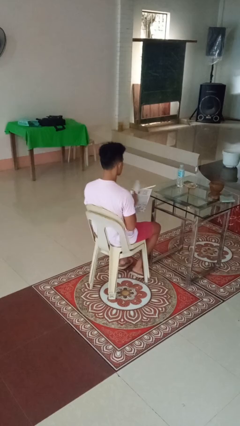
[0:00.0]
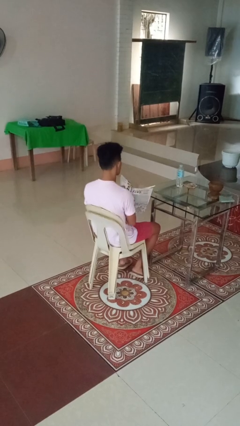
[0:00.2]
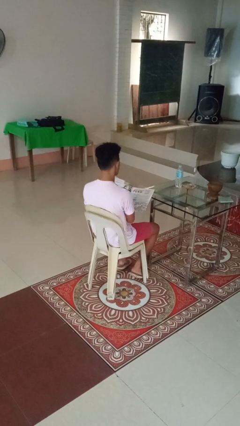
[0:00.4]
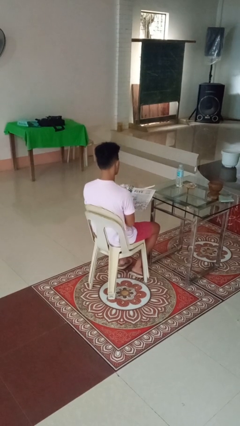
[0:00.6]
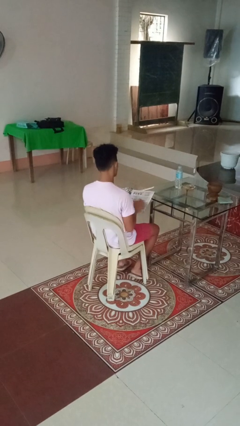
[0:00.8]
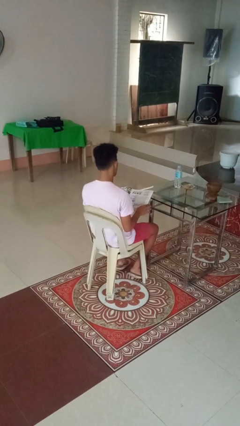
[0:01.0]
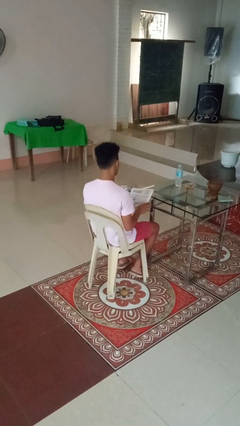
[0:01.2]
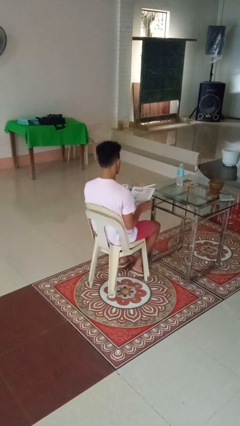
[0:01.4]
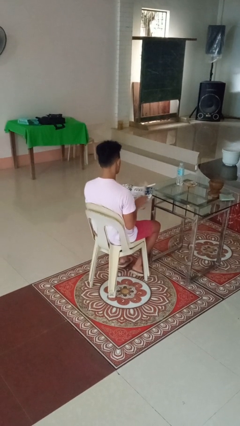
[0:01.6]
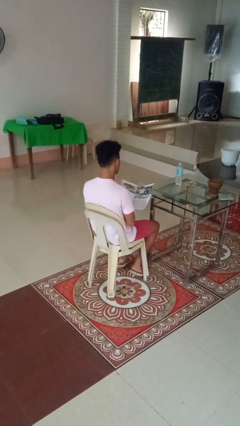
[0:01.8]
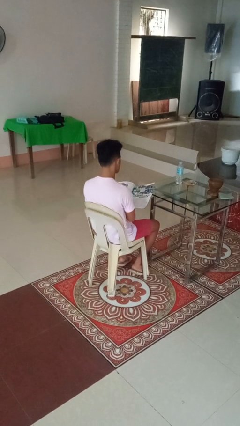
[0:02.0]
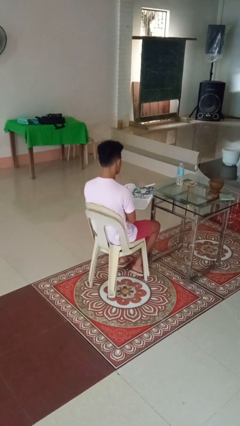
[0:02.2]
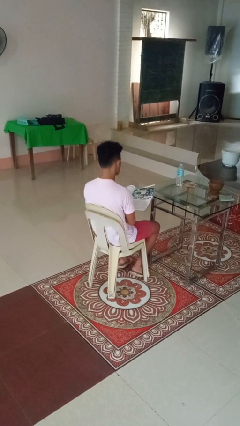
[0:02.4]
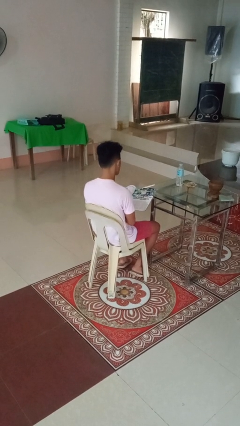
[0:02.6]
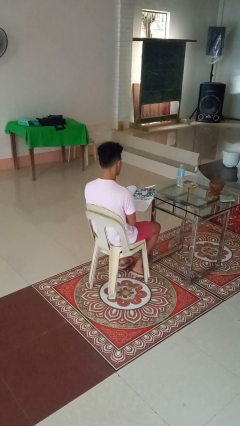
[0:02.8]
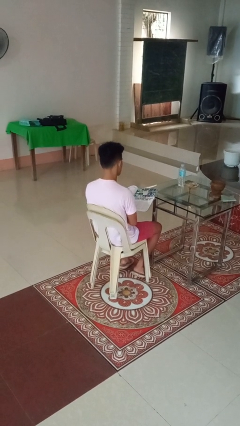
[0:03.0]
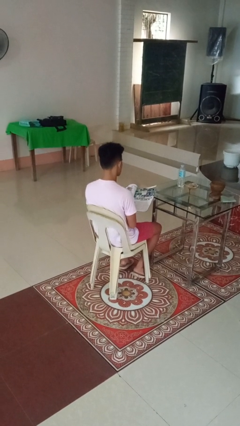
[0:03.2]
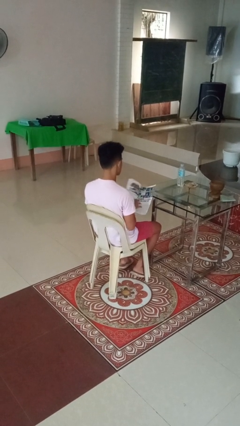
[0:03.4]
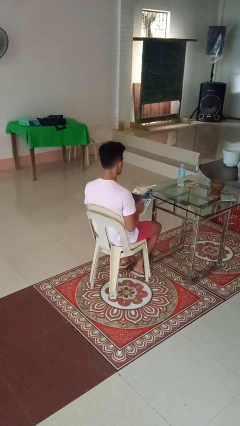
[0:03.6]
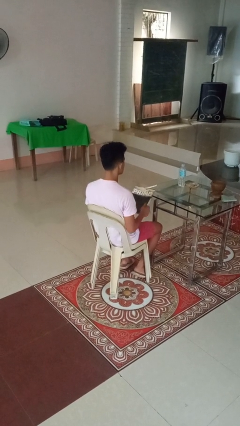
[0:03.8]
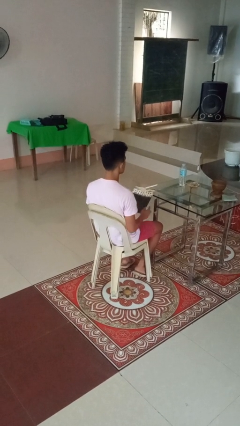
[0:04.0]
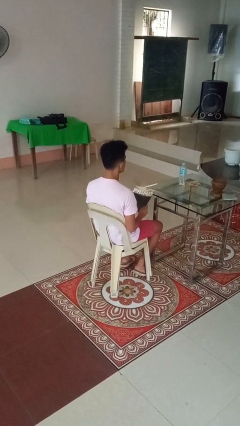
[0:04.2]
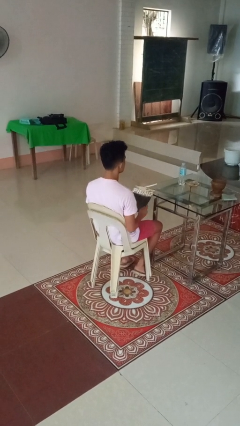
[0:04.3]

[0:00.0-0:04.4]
person reads magazine

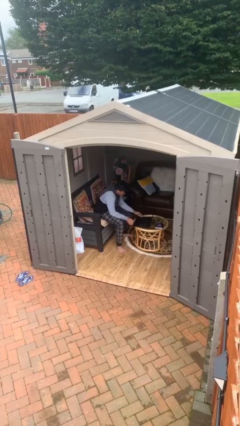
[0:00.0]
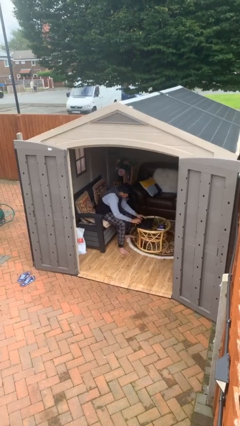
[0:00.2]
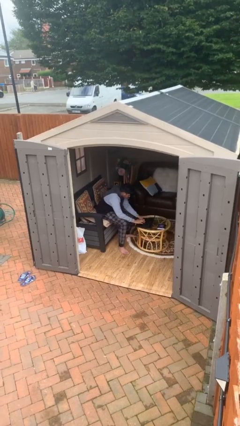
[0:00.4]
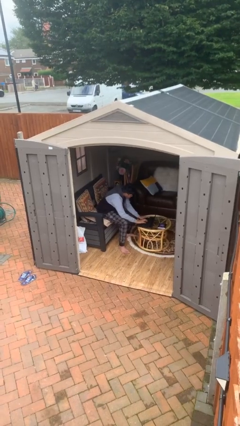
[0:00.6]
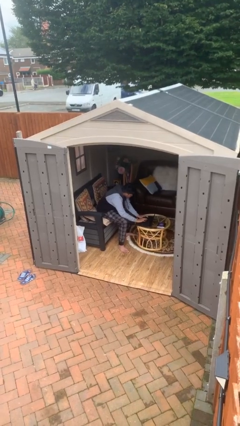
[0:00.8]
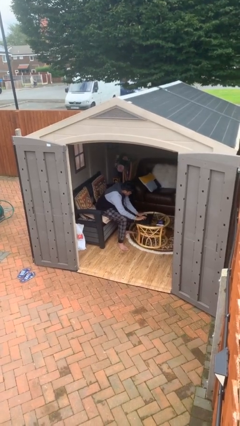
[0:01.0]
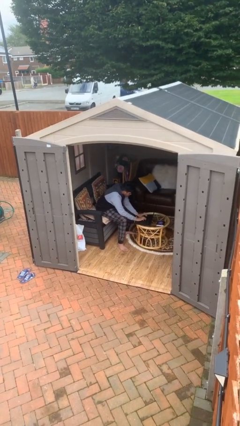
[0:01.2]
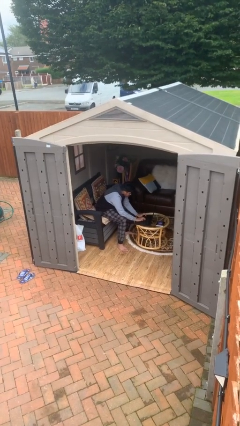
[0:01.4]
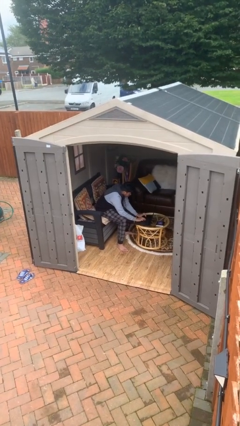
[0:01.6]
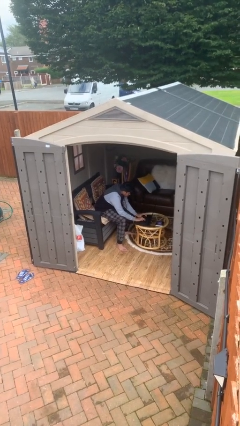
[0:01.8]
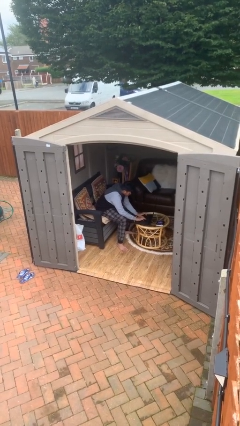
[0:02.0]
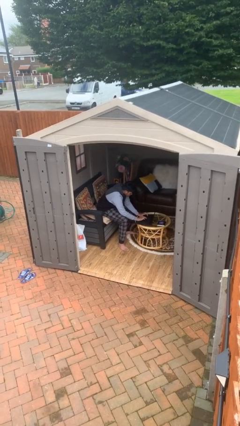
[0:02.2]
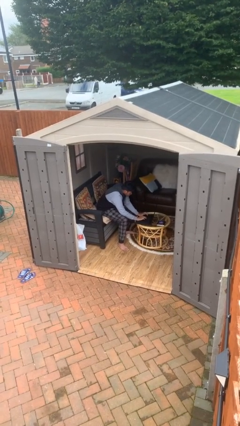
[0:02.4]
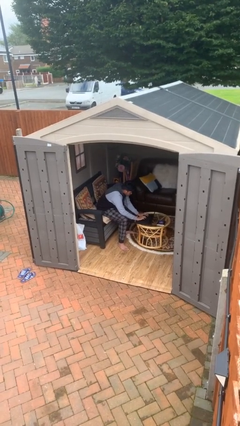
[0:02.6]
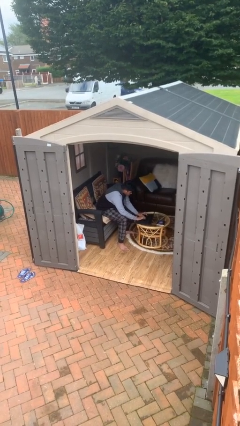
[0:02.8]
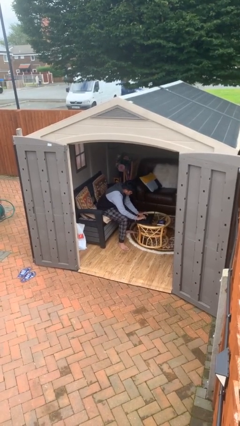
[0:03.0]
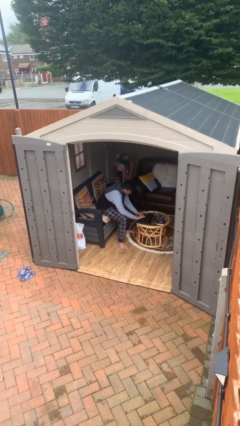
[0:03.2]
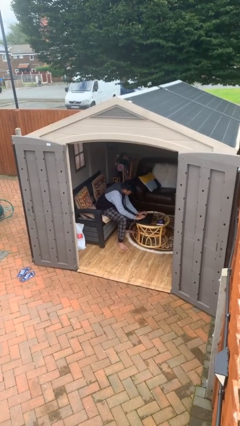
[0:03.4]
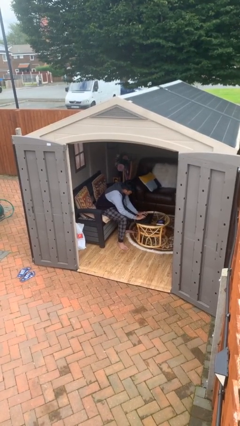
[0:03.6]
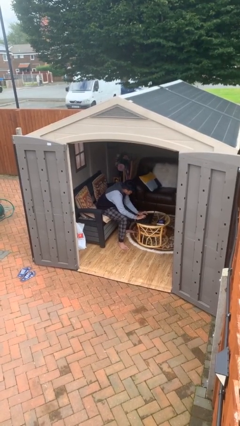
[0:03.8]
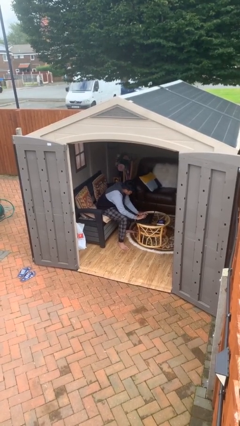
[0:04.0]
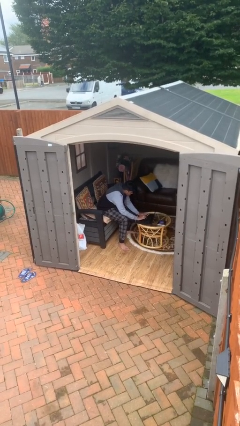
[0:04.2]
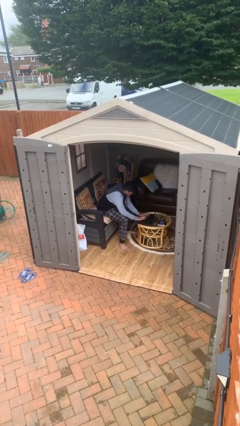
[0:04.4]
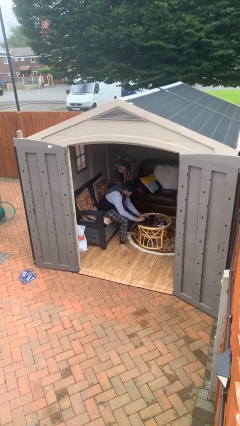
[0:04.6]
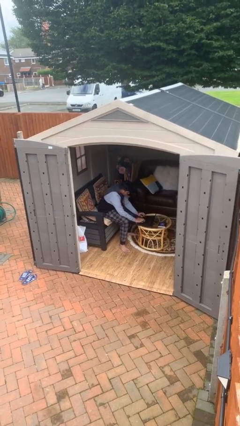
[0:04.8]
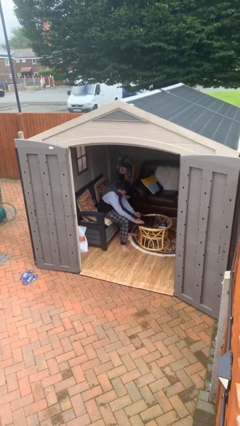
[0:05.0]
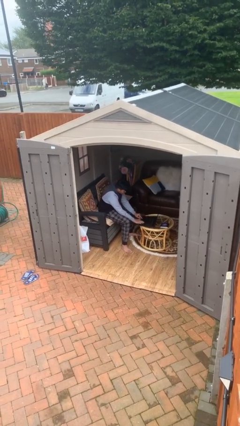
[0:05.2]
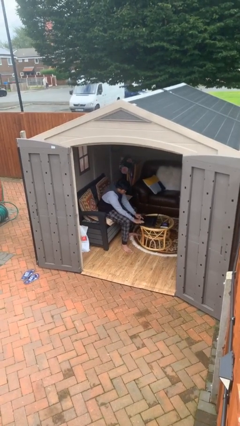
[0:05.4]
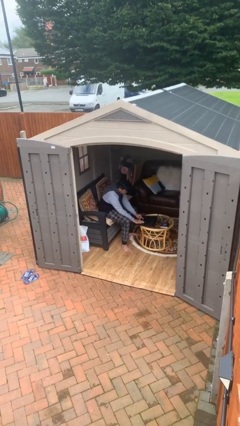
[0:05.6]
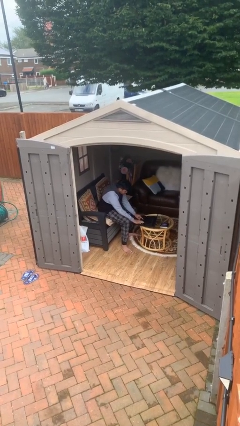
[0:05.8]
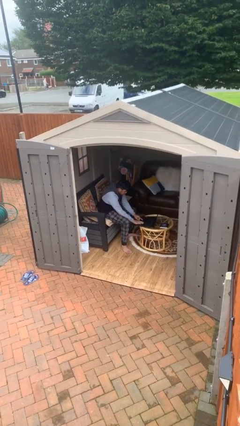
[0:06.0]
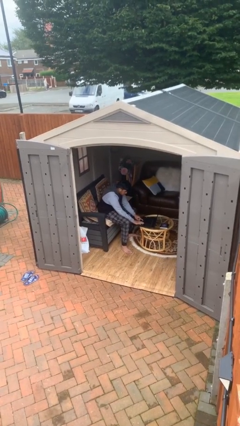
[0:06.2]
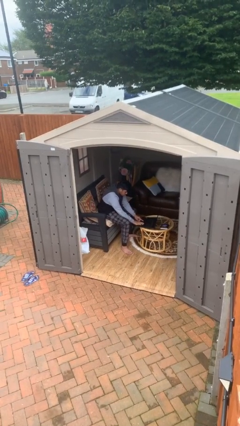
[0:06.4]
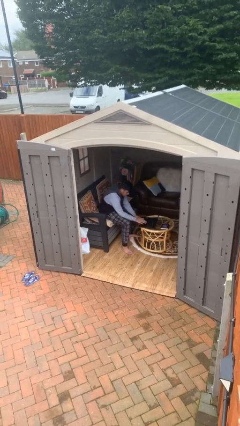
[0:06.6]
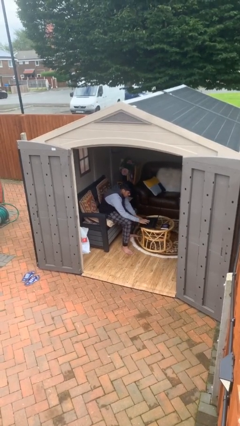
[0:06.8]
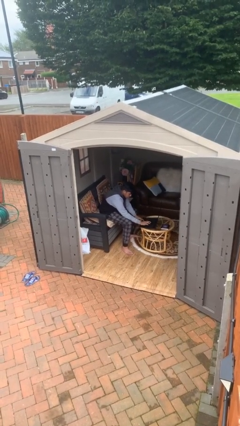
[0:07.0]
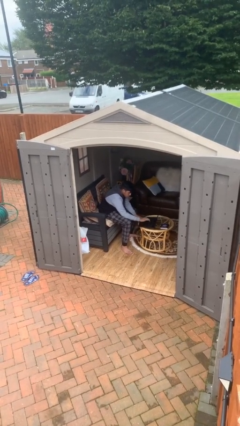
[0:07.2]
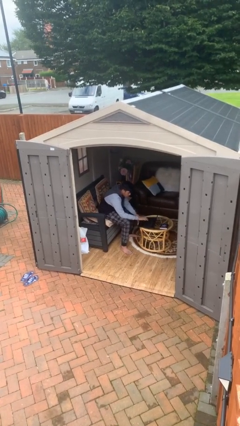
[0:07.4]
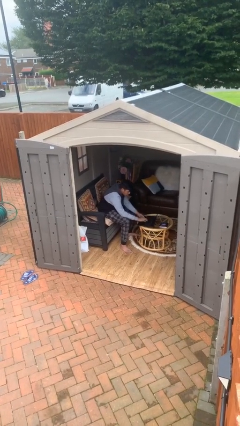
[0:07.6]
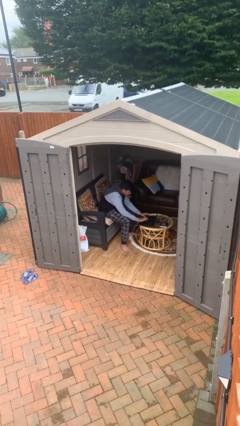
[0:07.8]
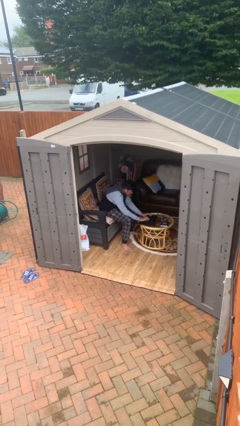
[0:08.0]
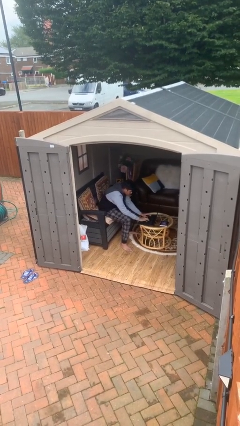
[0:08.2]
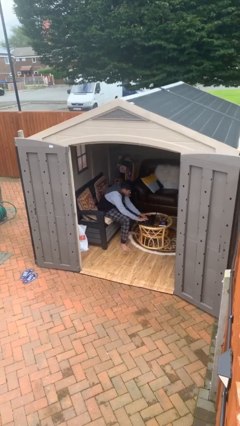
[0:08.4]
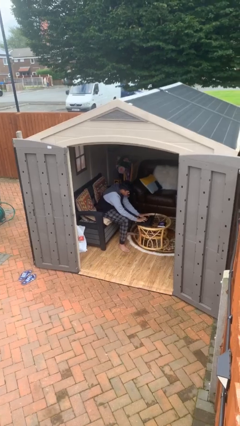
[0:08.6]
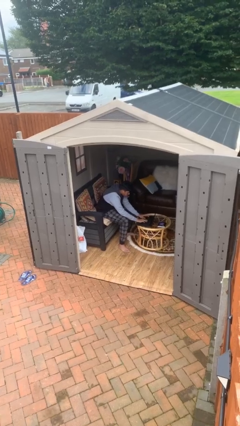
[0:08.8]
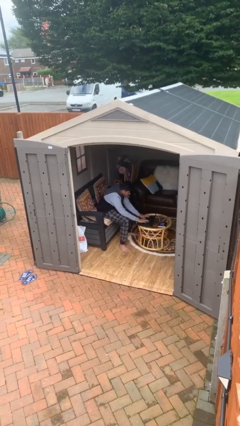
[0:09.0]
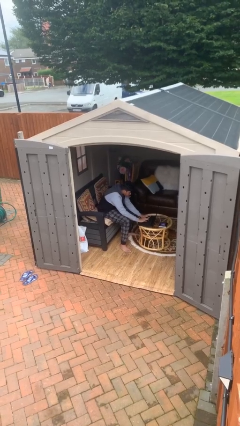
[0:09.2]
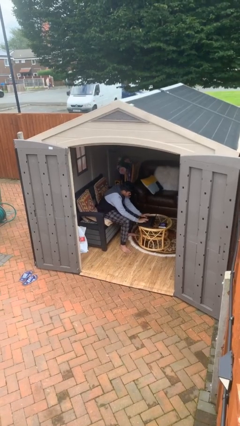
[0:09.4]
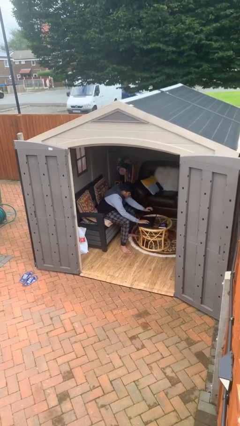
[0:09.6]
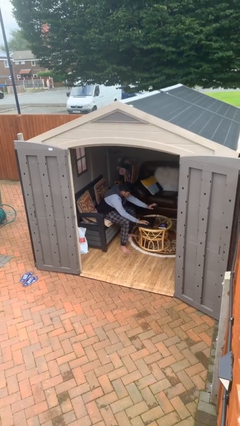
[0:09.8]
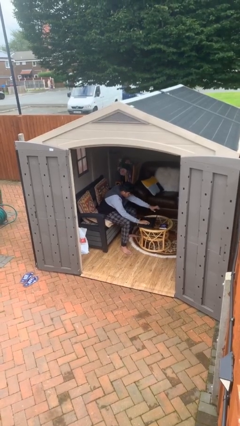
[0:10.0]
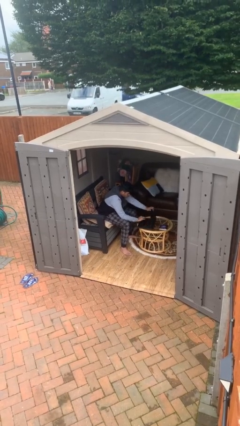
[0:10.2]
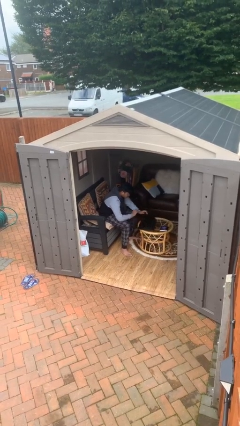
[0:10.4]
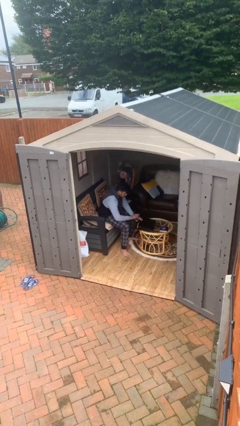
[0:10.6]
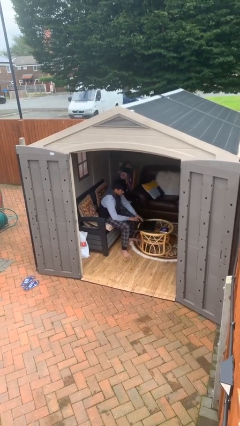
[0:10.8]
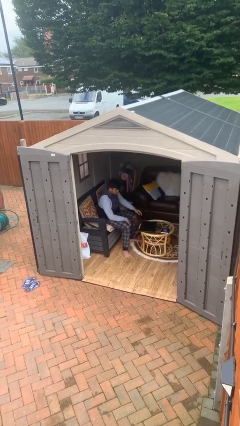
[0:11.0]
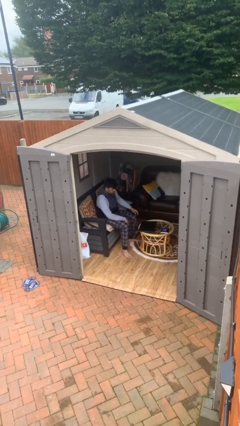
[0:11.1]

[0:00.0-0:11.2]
person interacts with laptop

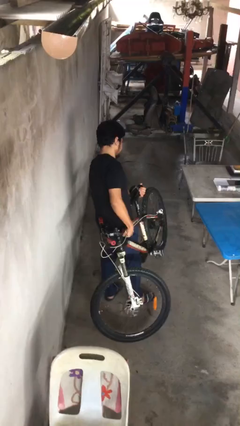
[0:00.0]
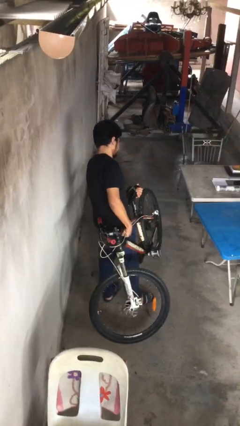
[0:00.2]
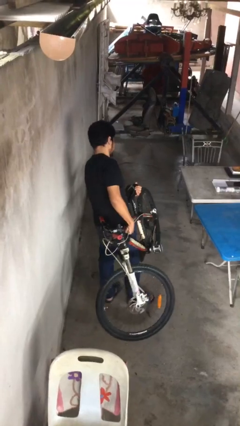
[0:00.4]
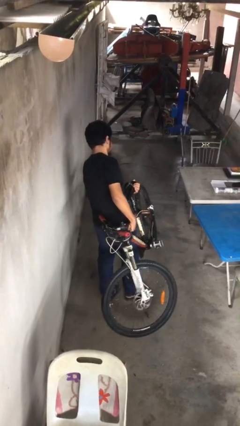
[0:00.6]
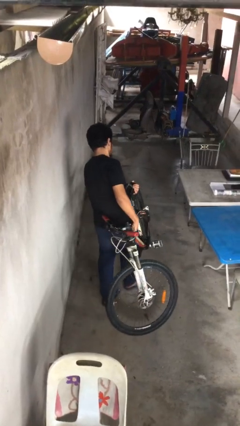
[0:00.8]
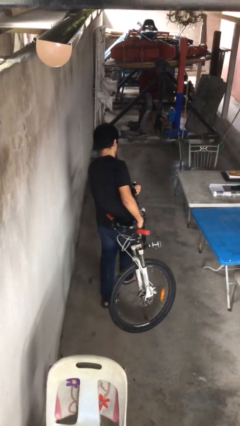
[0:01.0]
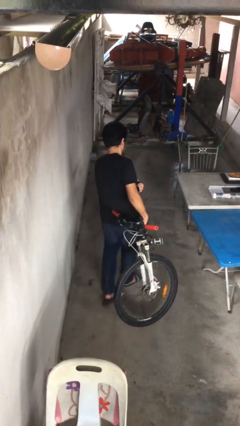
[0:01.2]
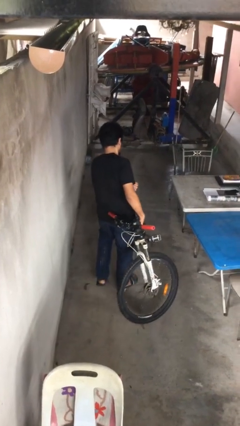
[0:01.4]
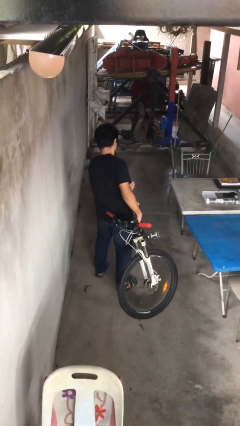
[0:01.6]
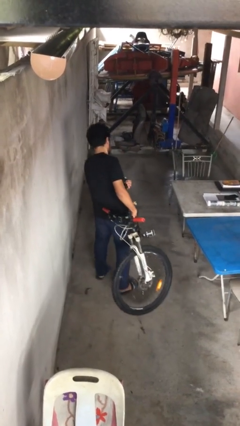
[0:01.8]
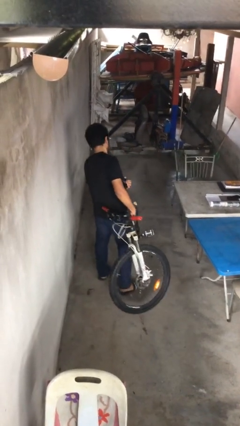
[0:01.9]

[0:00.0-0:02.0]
person carries bicycle

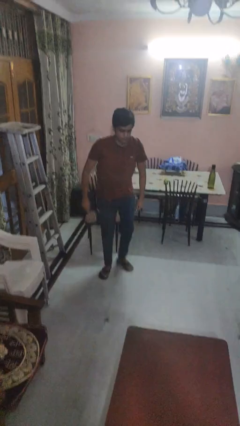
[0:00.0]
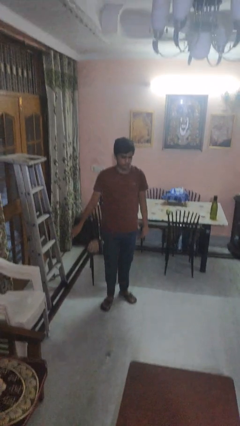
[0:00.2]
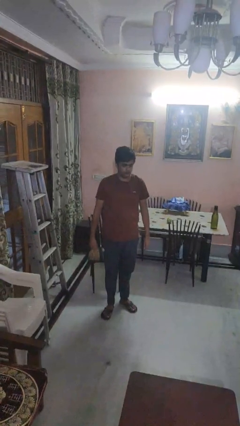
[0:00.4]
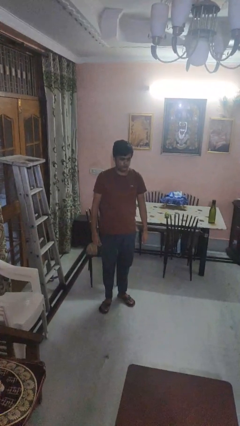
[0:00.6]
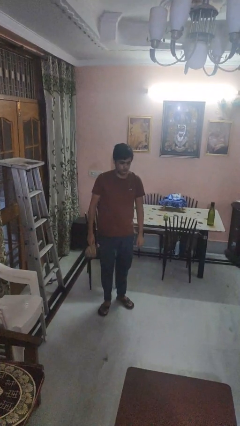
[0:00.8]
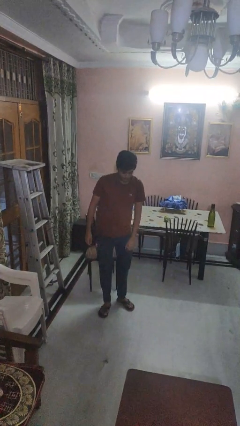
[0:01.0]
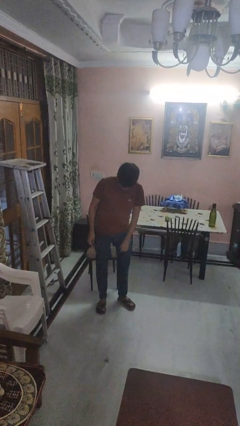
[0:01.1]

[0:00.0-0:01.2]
person stands up from floor
